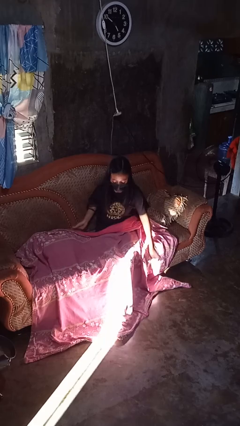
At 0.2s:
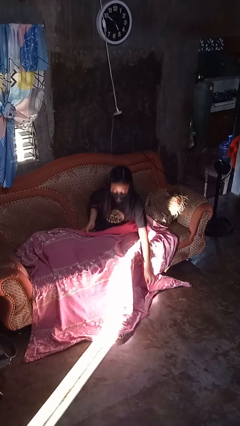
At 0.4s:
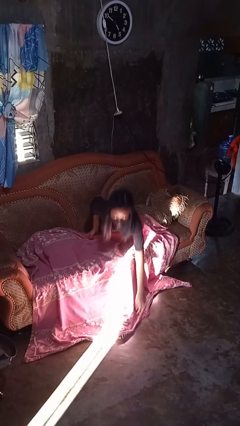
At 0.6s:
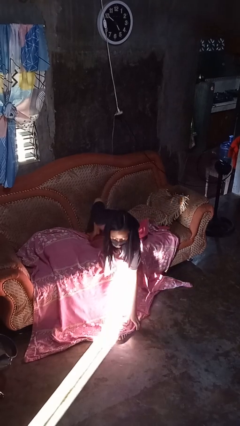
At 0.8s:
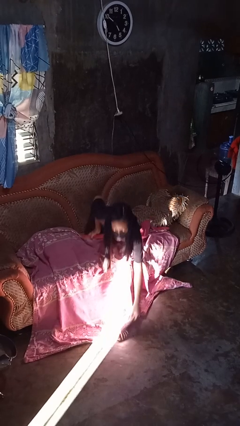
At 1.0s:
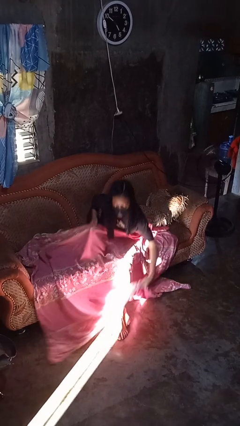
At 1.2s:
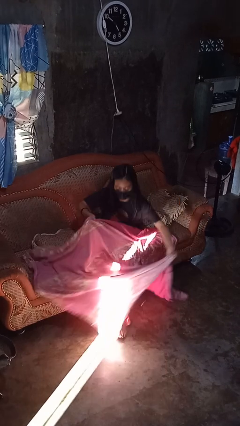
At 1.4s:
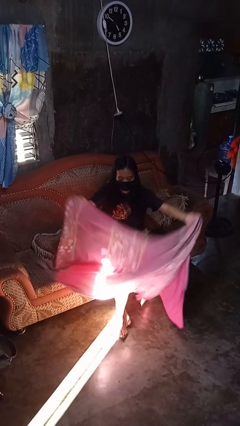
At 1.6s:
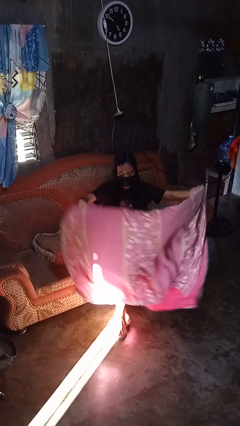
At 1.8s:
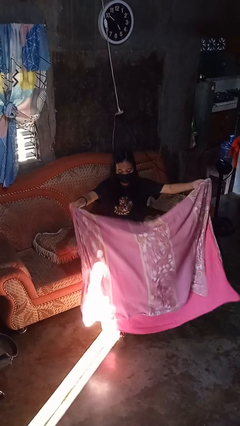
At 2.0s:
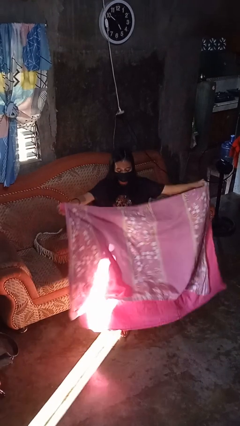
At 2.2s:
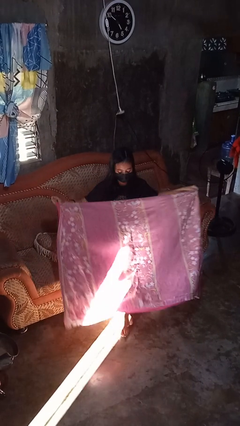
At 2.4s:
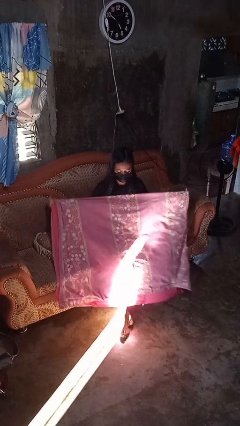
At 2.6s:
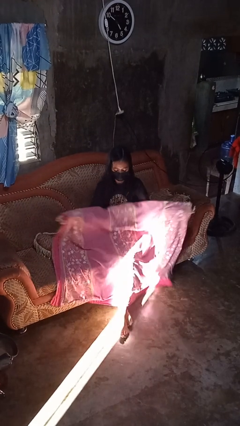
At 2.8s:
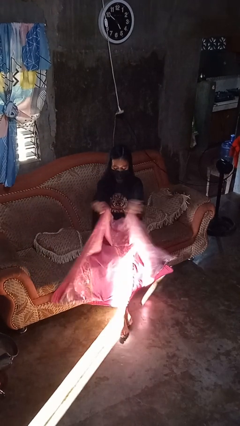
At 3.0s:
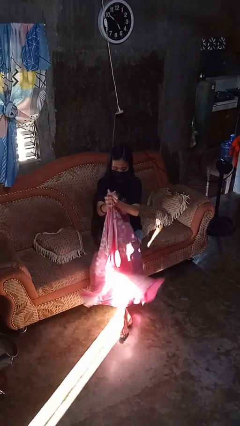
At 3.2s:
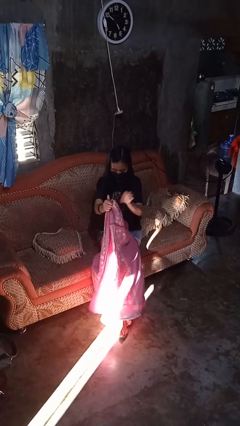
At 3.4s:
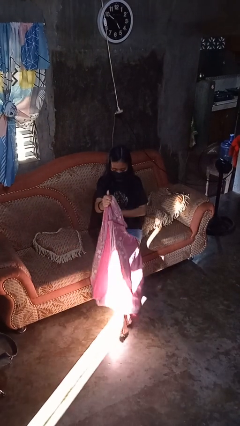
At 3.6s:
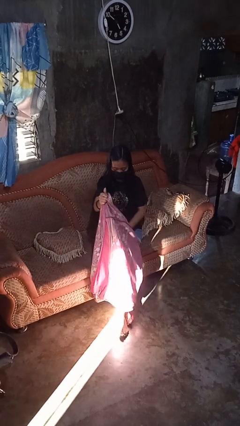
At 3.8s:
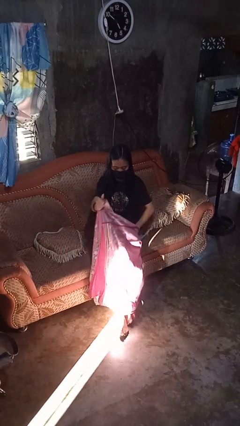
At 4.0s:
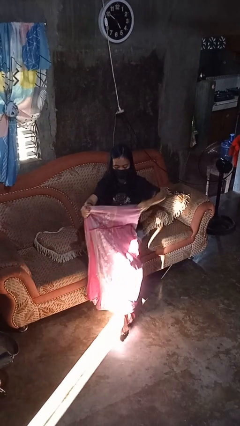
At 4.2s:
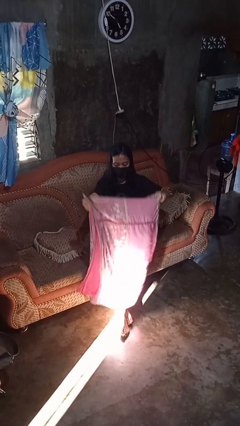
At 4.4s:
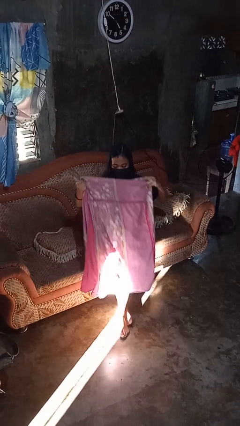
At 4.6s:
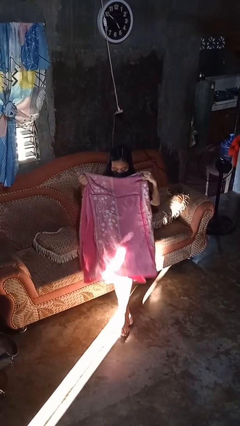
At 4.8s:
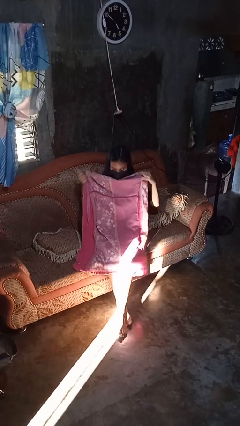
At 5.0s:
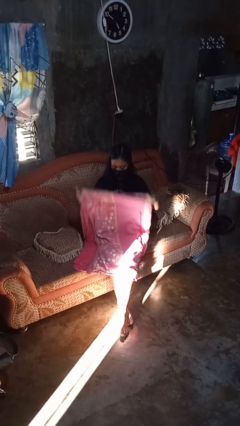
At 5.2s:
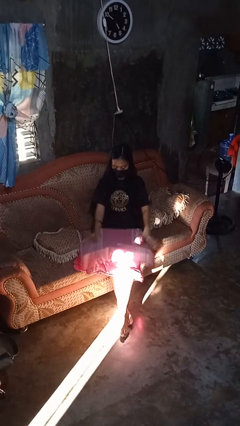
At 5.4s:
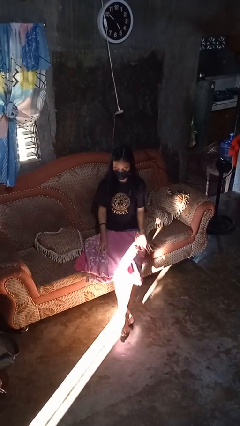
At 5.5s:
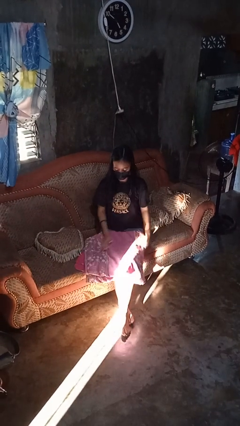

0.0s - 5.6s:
person folds blanket

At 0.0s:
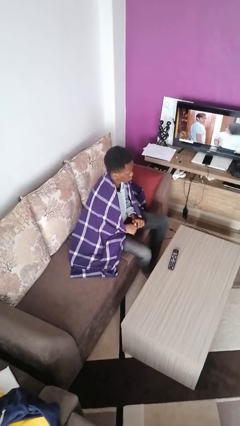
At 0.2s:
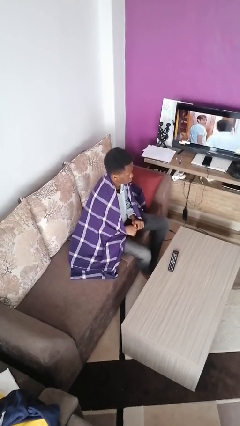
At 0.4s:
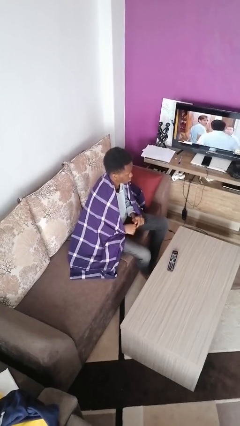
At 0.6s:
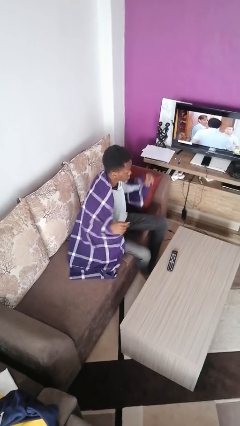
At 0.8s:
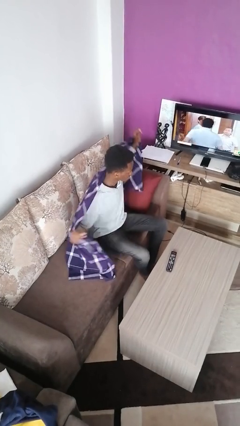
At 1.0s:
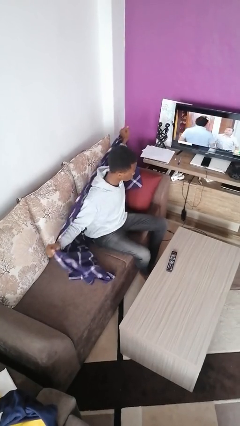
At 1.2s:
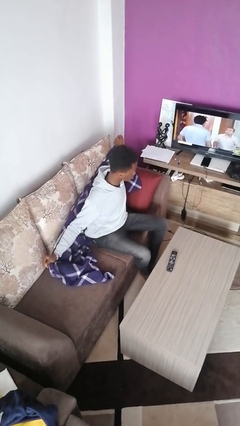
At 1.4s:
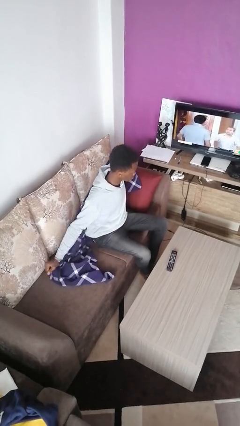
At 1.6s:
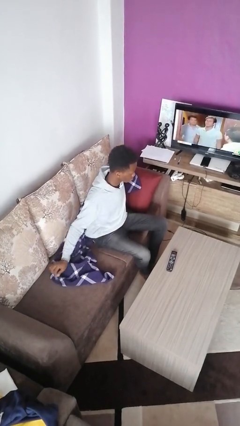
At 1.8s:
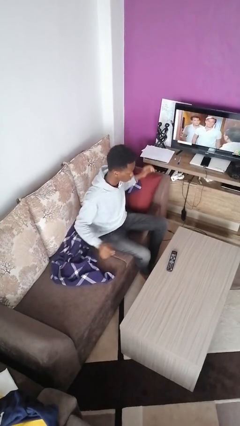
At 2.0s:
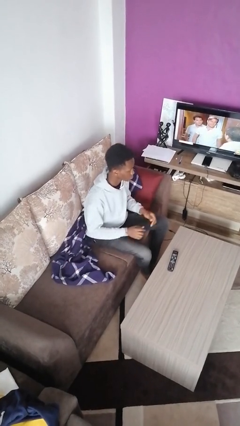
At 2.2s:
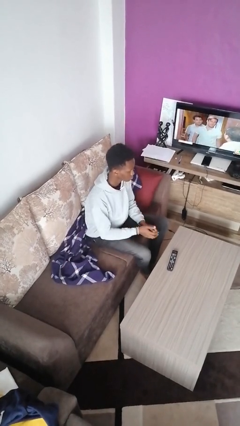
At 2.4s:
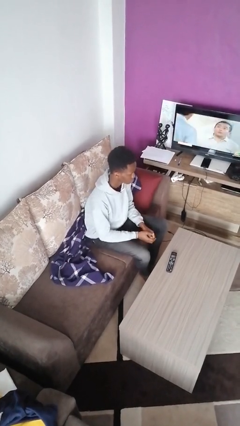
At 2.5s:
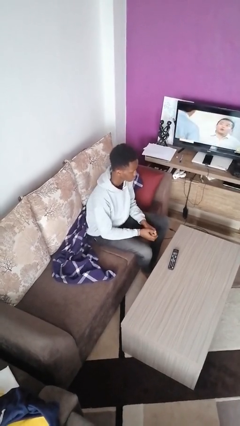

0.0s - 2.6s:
person uncovers with blanket

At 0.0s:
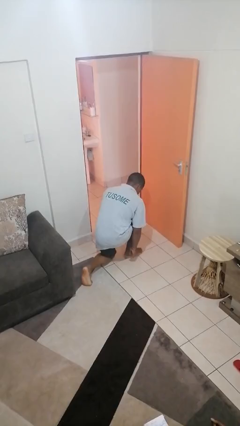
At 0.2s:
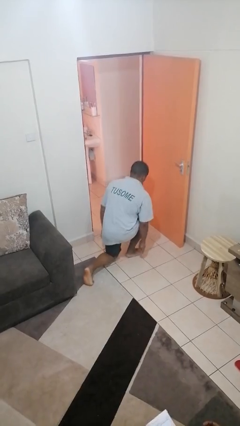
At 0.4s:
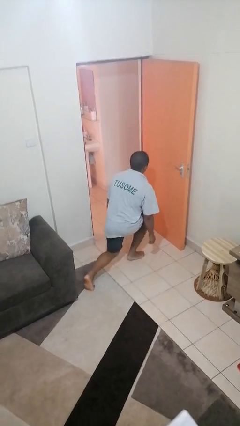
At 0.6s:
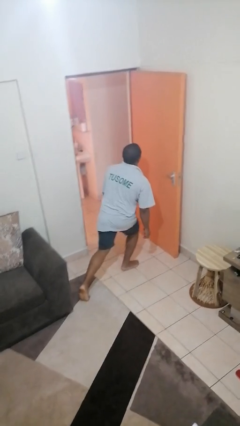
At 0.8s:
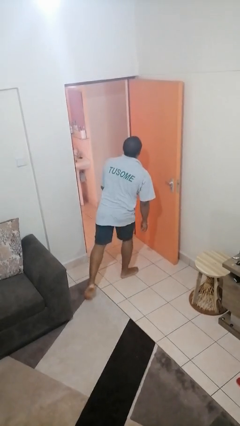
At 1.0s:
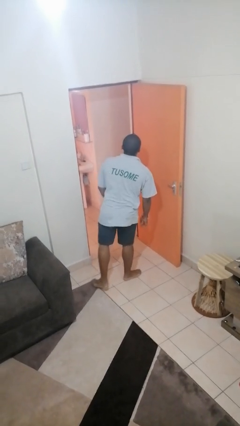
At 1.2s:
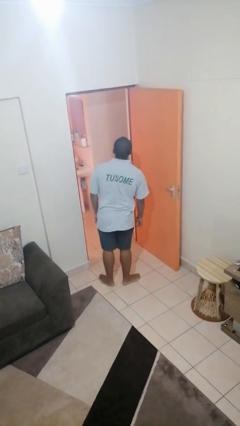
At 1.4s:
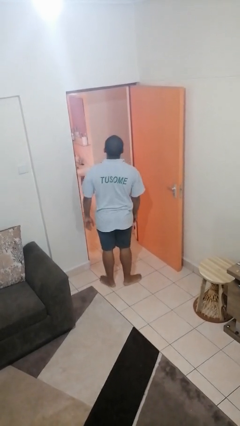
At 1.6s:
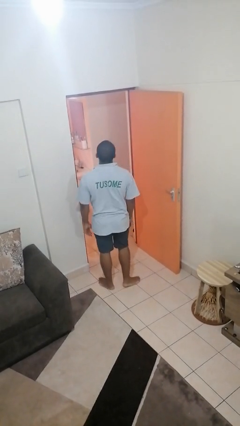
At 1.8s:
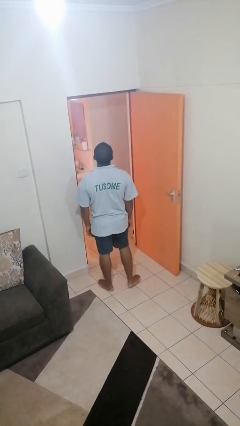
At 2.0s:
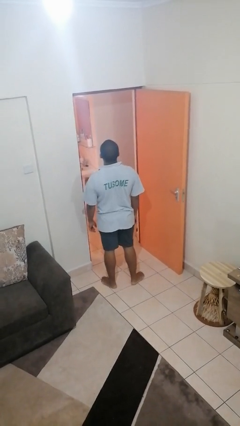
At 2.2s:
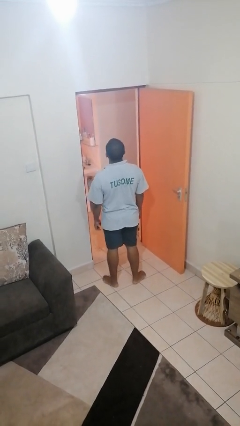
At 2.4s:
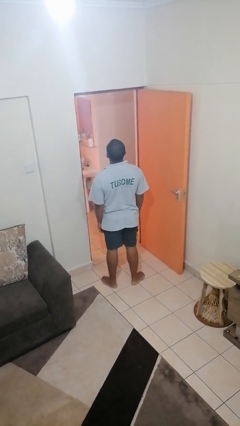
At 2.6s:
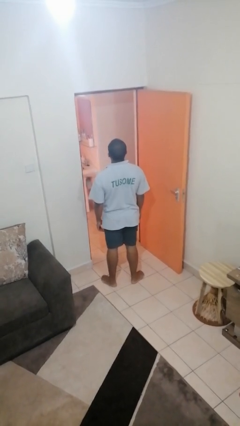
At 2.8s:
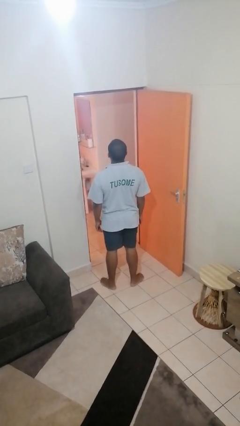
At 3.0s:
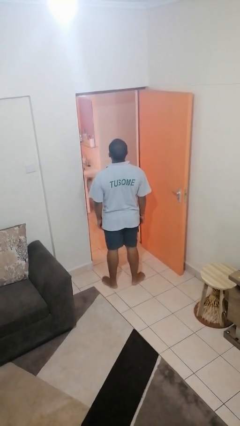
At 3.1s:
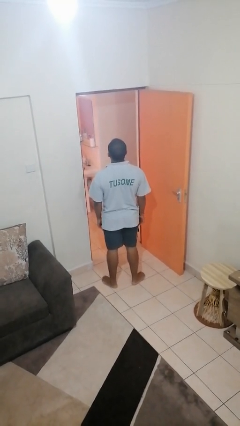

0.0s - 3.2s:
person stands up from floor

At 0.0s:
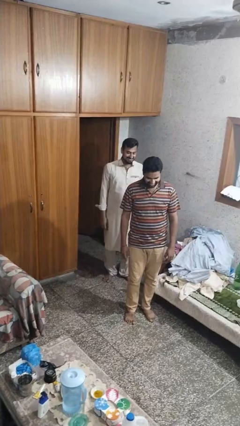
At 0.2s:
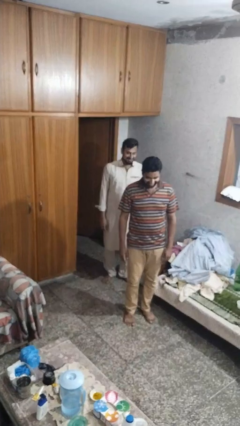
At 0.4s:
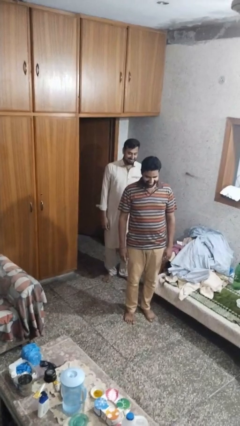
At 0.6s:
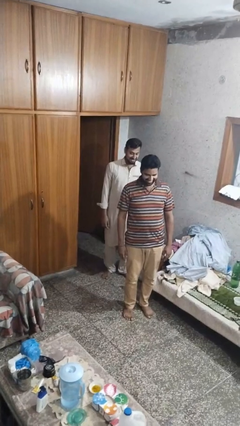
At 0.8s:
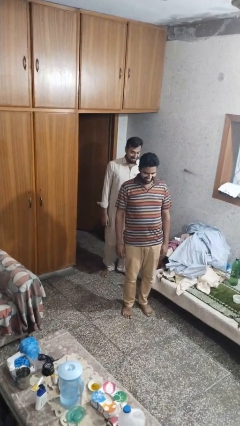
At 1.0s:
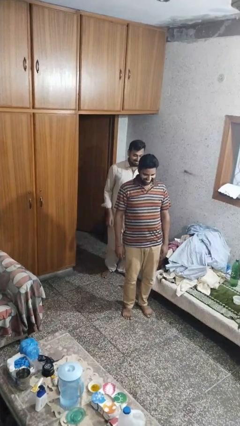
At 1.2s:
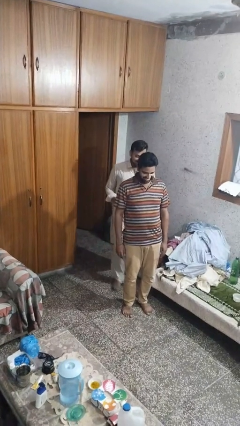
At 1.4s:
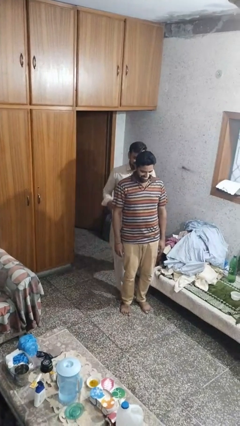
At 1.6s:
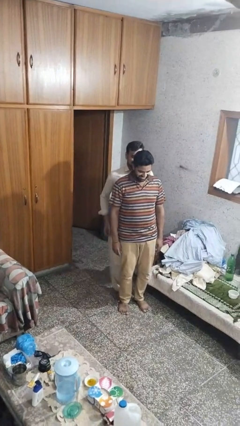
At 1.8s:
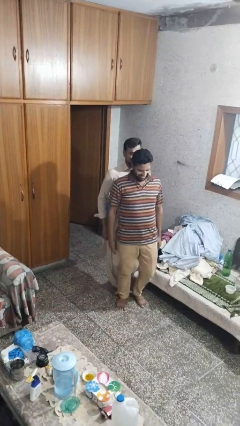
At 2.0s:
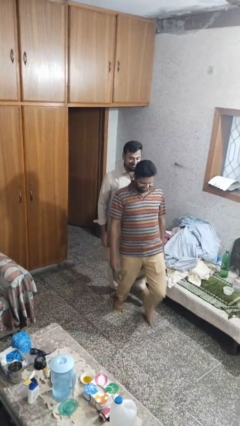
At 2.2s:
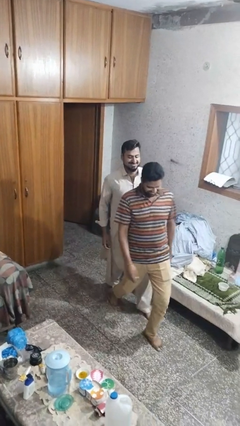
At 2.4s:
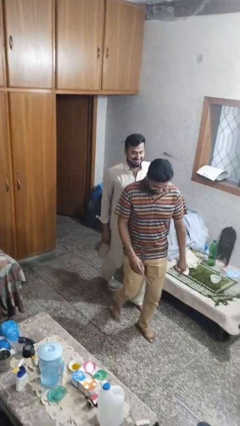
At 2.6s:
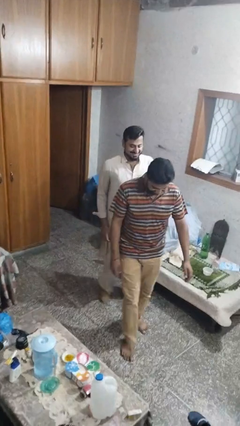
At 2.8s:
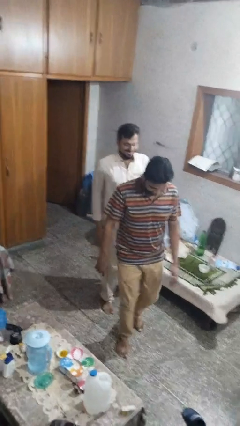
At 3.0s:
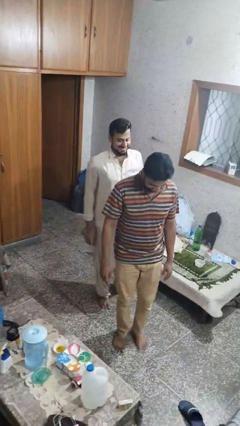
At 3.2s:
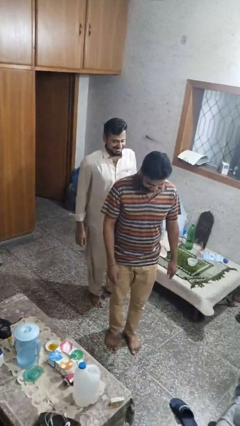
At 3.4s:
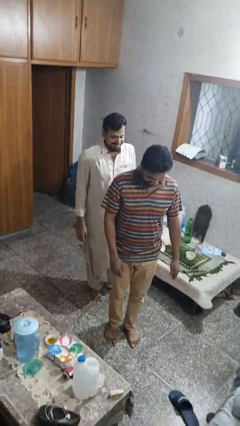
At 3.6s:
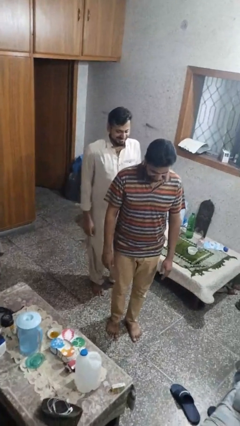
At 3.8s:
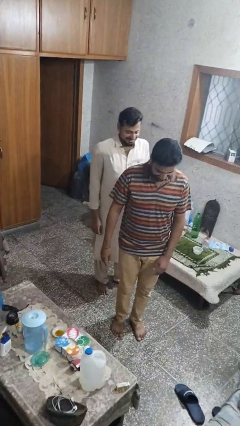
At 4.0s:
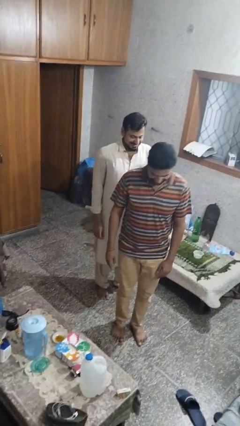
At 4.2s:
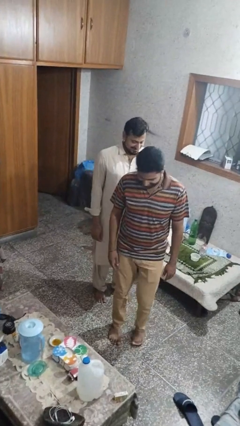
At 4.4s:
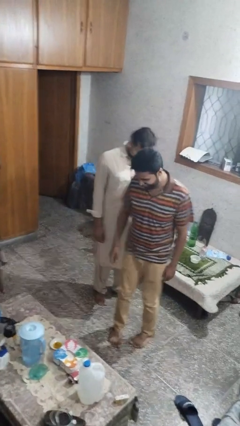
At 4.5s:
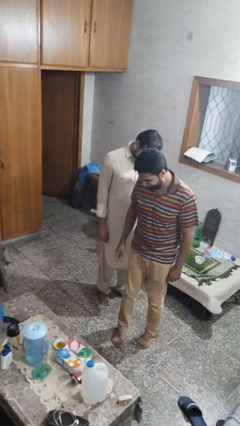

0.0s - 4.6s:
person bumps into person

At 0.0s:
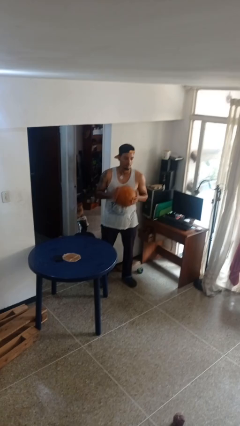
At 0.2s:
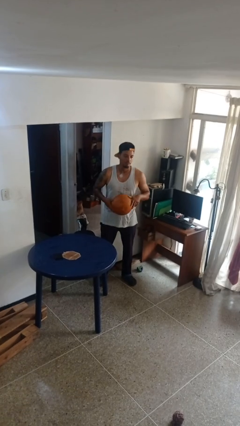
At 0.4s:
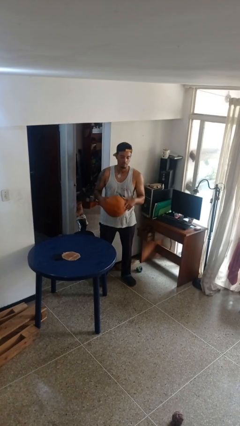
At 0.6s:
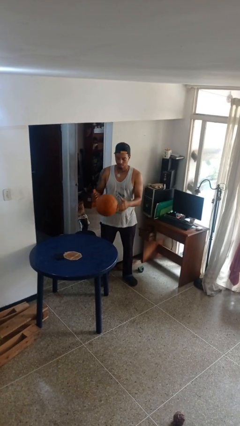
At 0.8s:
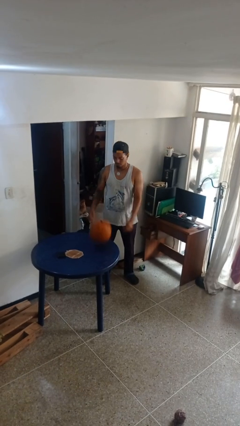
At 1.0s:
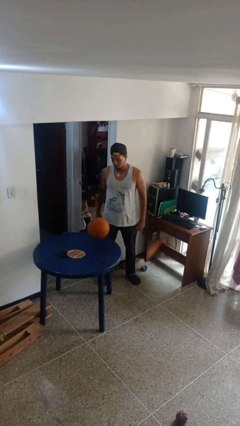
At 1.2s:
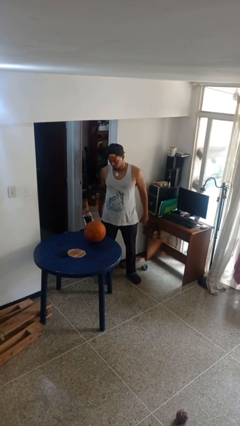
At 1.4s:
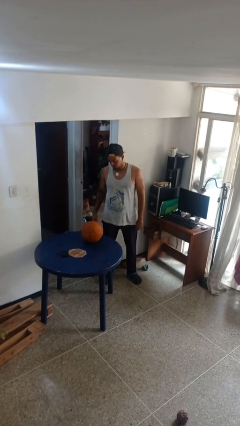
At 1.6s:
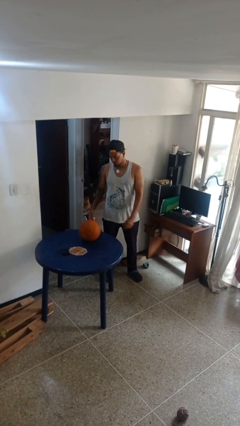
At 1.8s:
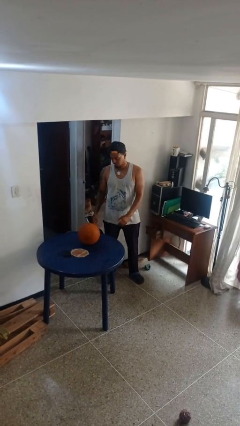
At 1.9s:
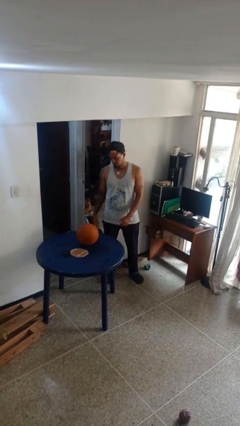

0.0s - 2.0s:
person throws object on table
